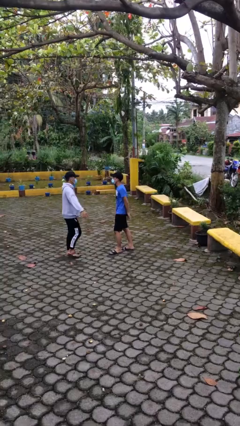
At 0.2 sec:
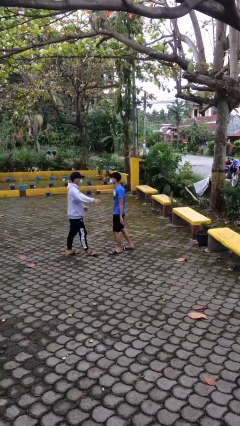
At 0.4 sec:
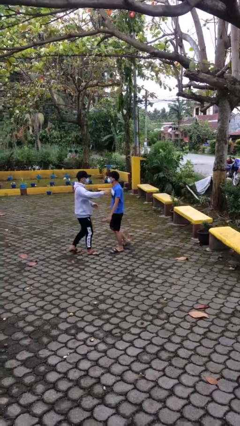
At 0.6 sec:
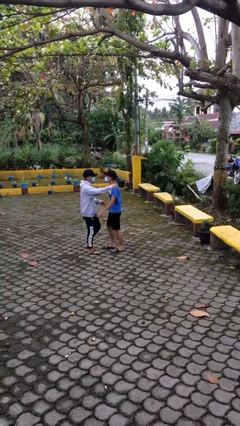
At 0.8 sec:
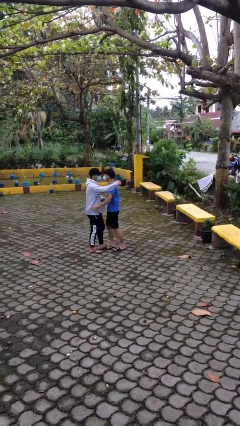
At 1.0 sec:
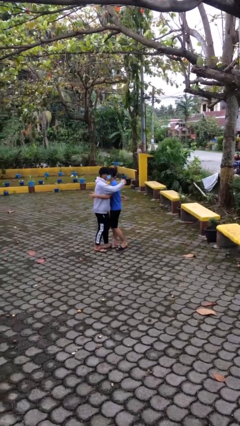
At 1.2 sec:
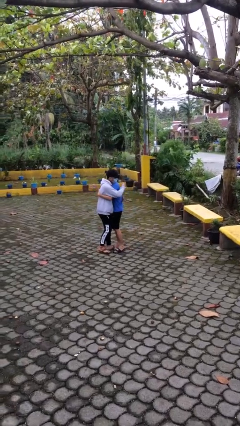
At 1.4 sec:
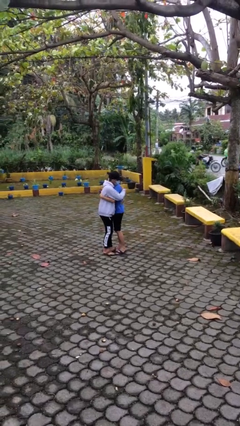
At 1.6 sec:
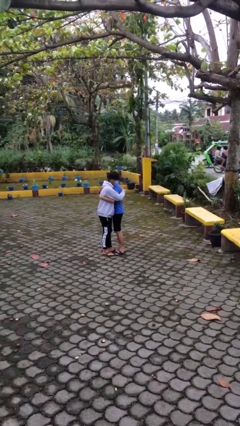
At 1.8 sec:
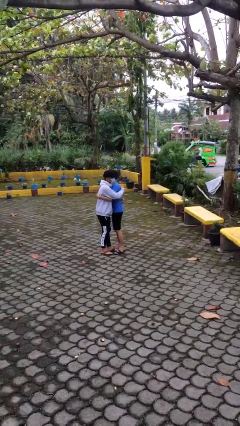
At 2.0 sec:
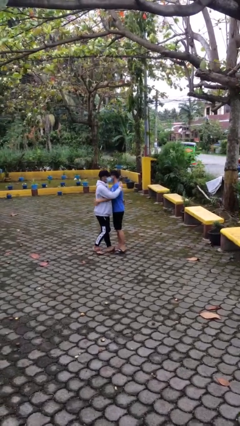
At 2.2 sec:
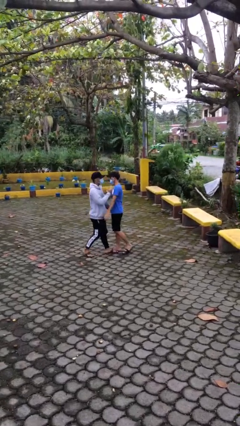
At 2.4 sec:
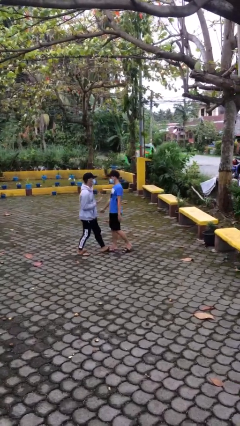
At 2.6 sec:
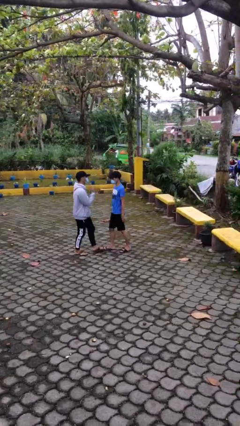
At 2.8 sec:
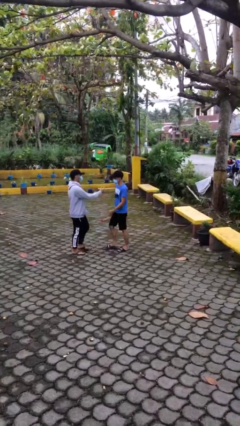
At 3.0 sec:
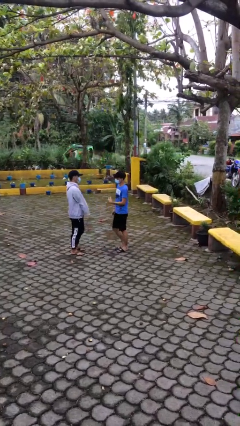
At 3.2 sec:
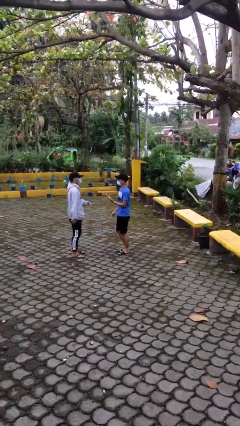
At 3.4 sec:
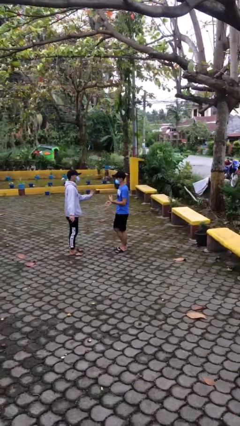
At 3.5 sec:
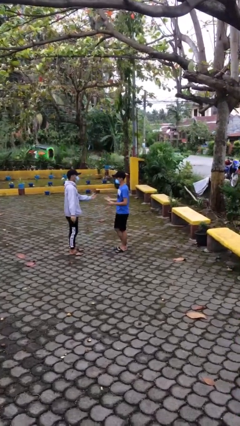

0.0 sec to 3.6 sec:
person embraces person

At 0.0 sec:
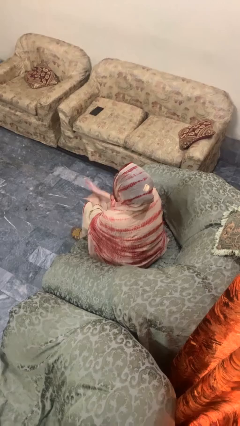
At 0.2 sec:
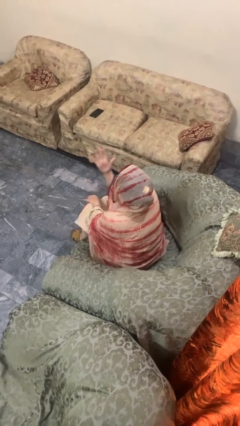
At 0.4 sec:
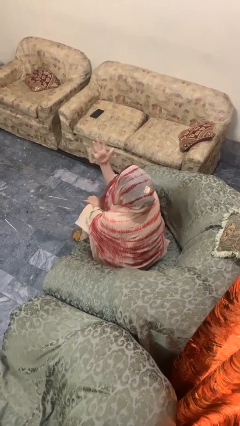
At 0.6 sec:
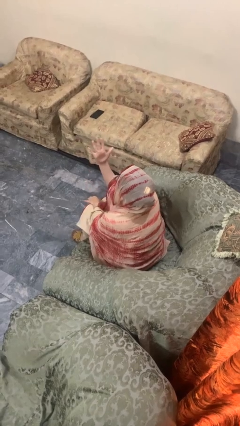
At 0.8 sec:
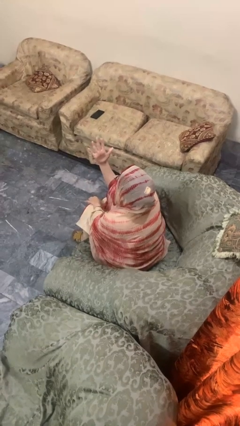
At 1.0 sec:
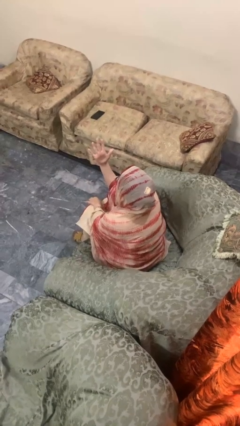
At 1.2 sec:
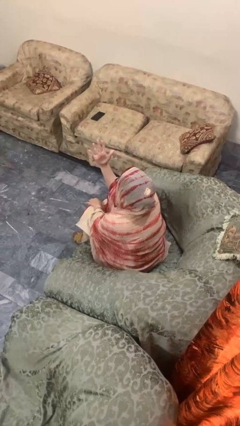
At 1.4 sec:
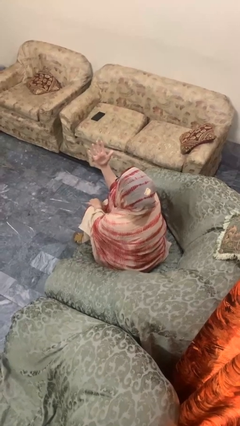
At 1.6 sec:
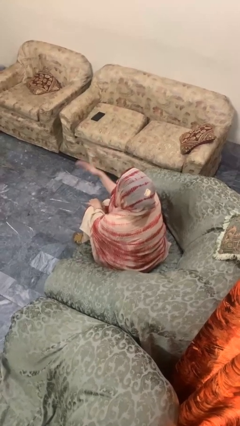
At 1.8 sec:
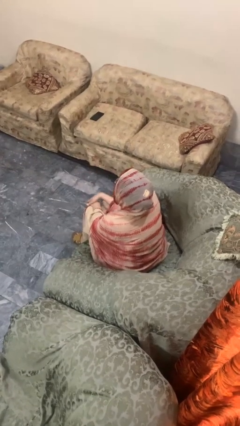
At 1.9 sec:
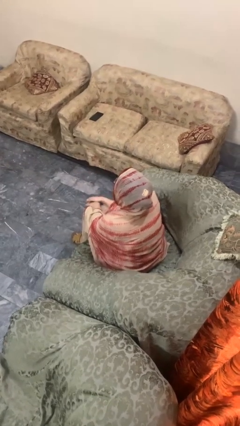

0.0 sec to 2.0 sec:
person gestures number five

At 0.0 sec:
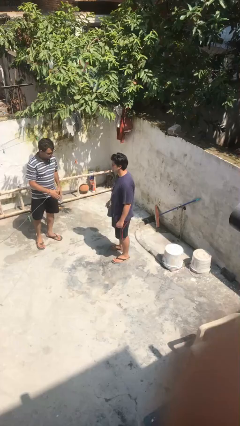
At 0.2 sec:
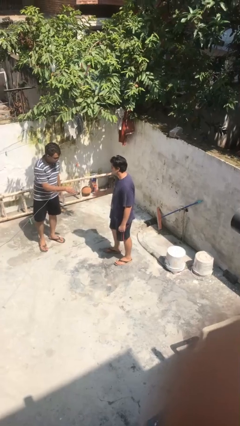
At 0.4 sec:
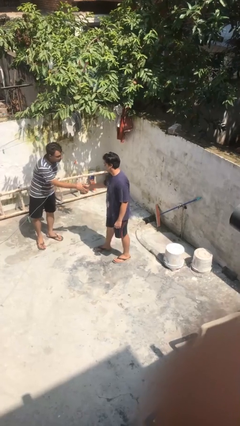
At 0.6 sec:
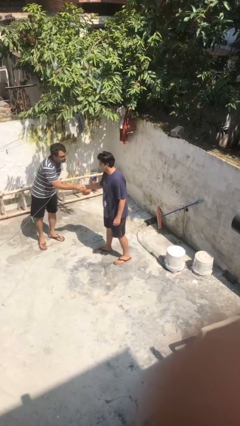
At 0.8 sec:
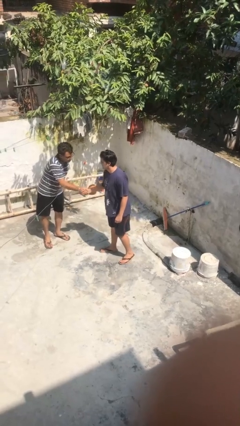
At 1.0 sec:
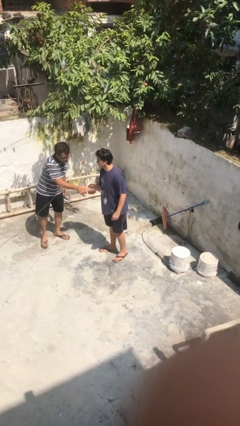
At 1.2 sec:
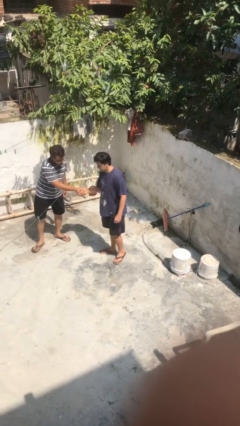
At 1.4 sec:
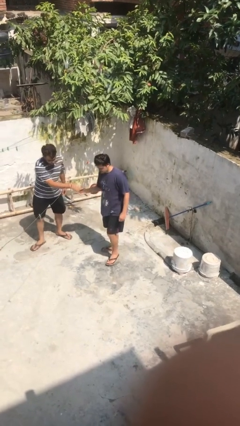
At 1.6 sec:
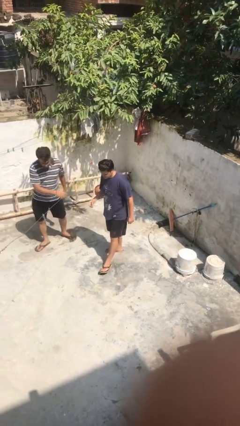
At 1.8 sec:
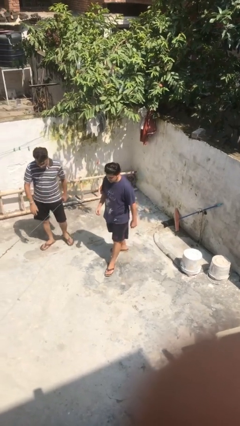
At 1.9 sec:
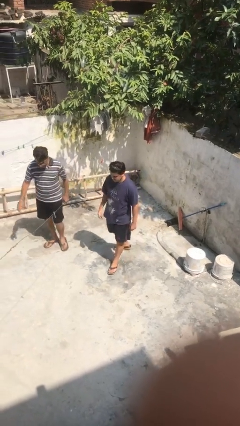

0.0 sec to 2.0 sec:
person shakes hand

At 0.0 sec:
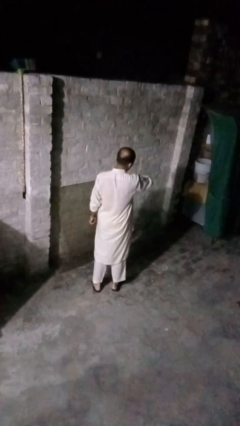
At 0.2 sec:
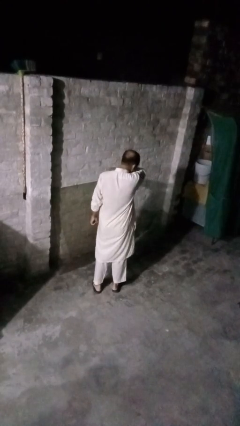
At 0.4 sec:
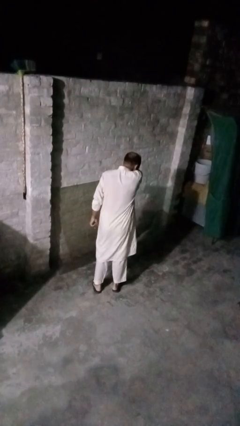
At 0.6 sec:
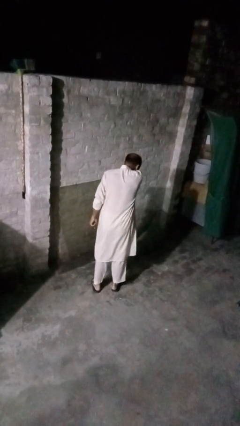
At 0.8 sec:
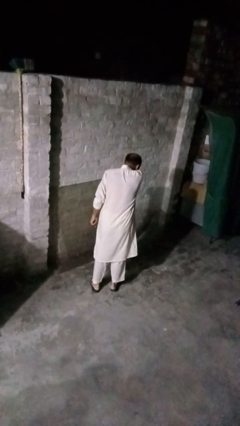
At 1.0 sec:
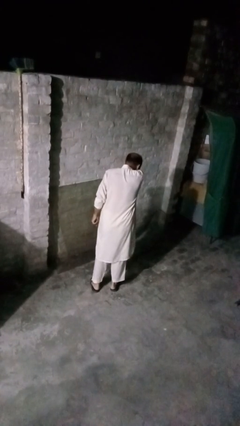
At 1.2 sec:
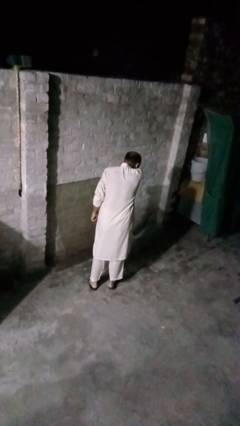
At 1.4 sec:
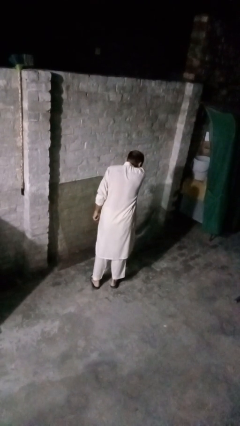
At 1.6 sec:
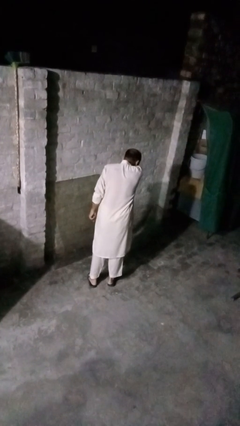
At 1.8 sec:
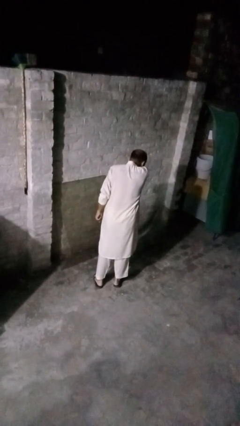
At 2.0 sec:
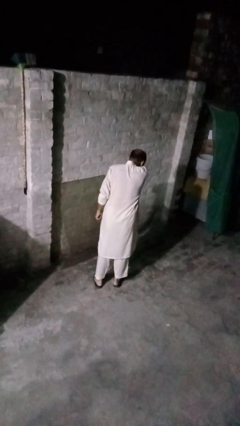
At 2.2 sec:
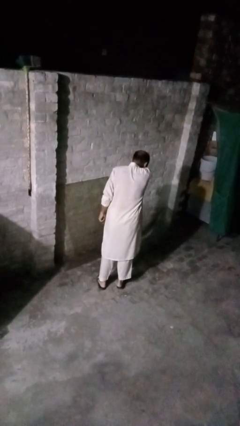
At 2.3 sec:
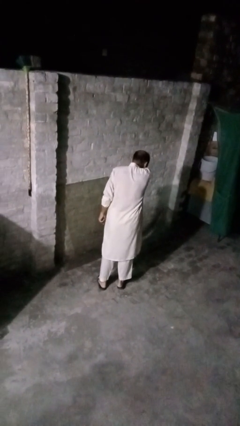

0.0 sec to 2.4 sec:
person sneezes into arm

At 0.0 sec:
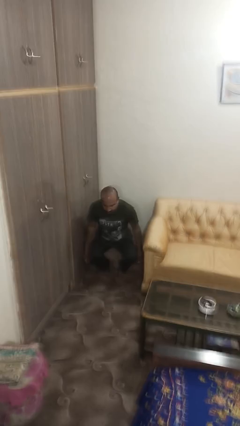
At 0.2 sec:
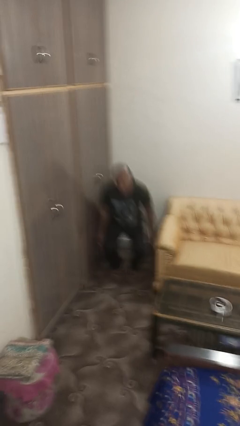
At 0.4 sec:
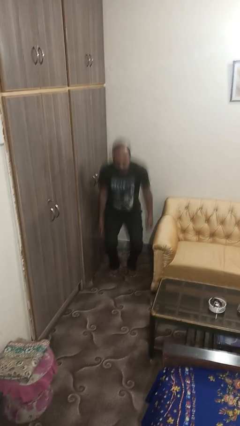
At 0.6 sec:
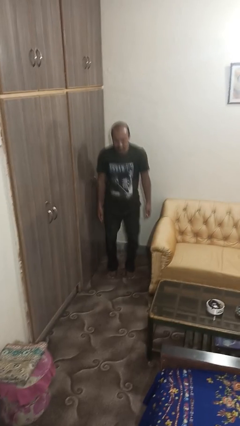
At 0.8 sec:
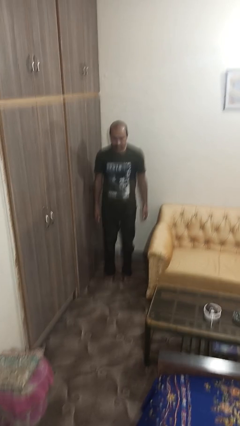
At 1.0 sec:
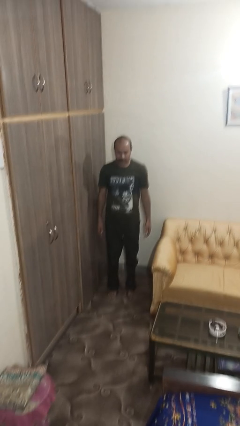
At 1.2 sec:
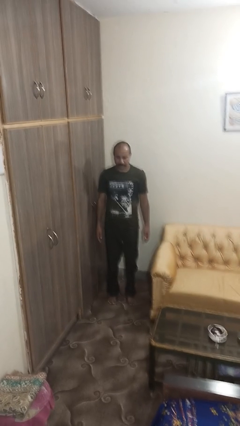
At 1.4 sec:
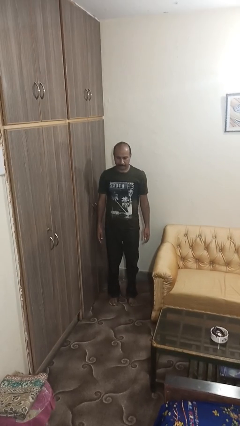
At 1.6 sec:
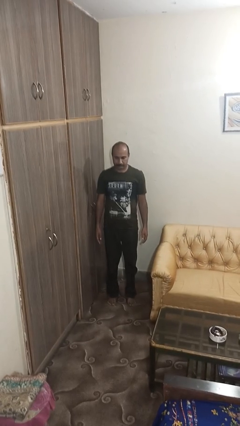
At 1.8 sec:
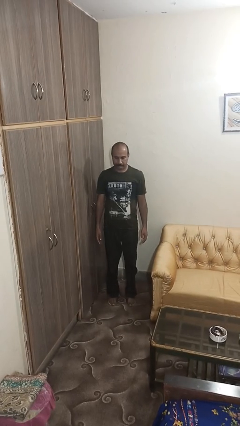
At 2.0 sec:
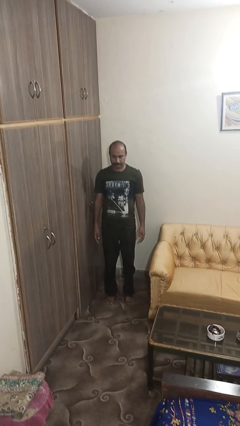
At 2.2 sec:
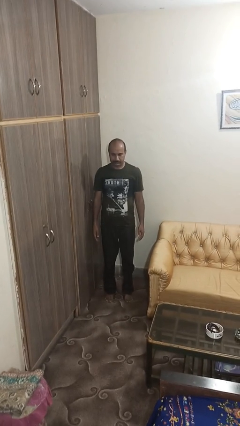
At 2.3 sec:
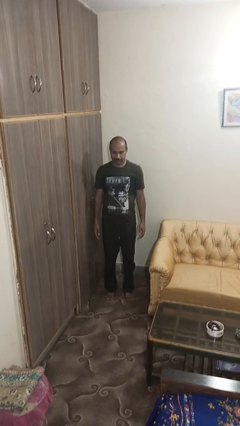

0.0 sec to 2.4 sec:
person stands up

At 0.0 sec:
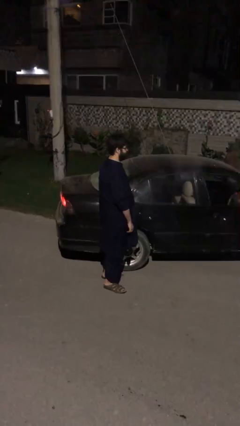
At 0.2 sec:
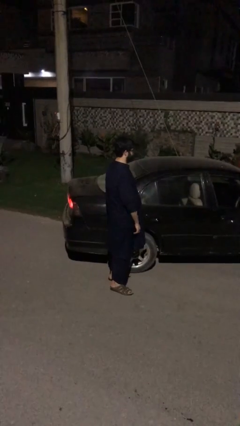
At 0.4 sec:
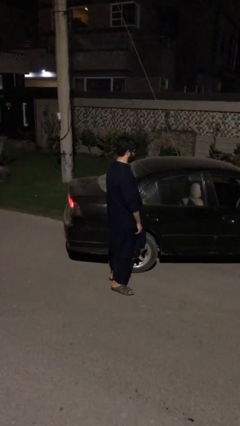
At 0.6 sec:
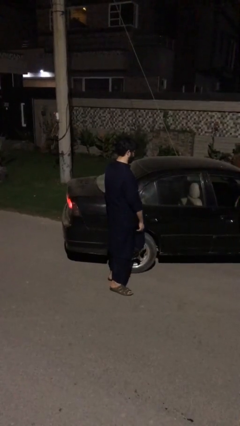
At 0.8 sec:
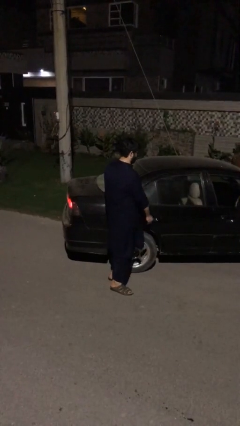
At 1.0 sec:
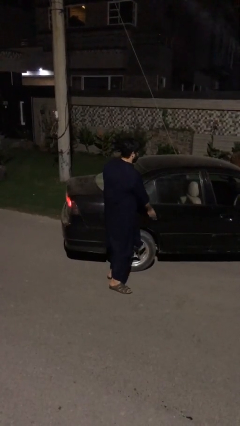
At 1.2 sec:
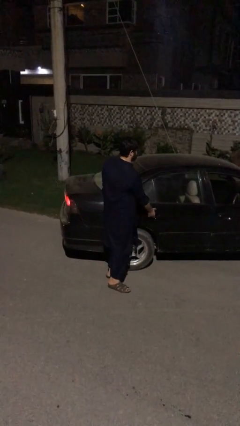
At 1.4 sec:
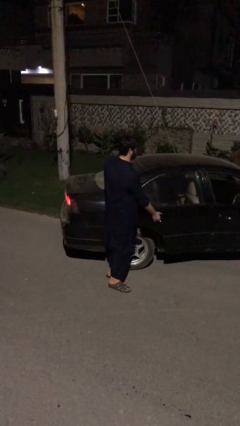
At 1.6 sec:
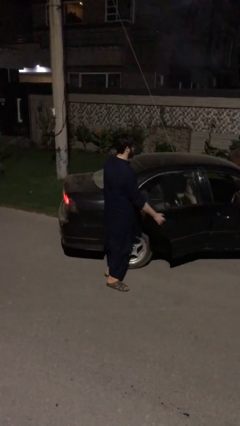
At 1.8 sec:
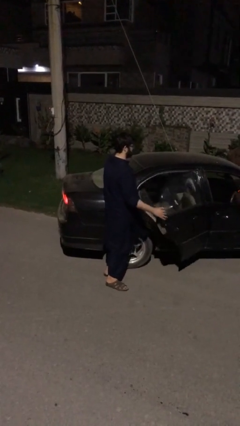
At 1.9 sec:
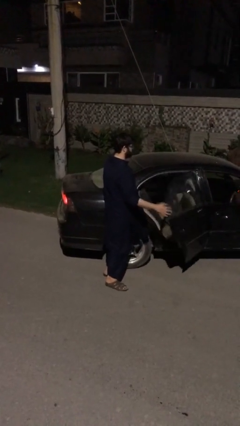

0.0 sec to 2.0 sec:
person opens car door

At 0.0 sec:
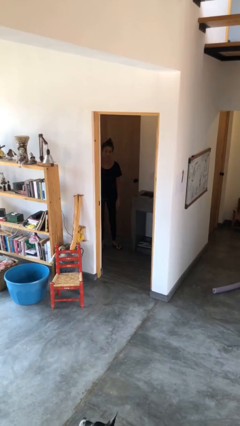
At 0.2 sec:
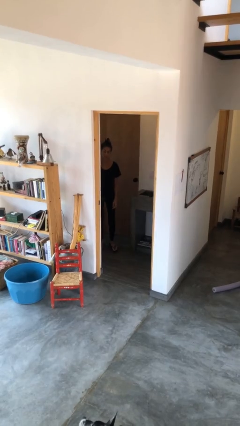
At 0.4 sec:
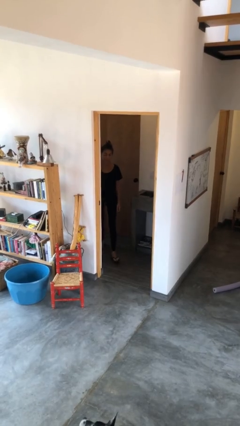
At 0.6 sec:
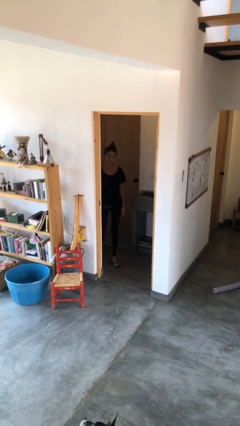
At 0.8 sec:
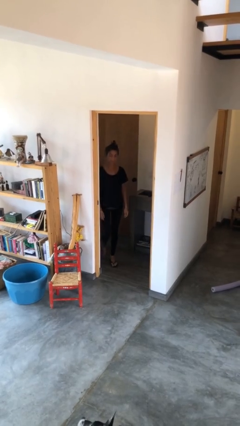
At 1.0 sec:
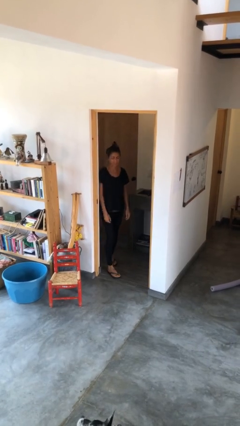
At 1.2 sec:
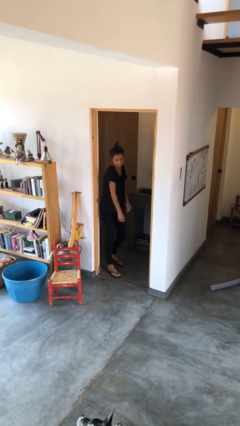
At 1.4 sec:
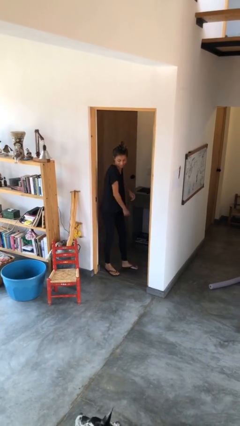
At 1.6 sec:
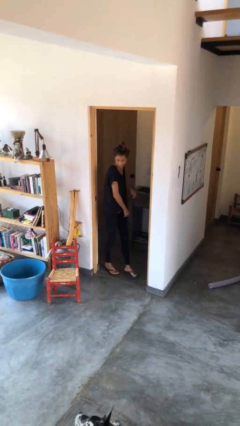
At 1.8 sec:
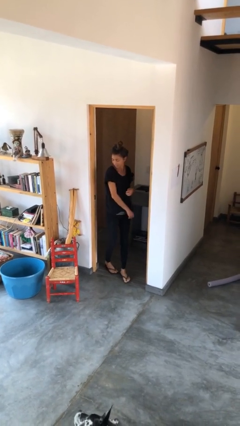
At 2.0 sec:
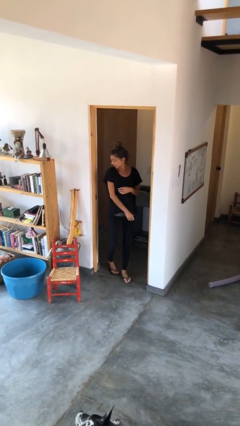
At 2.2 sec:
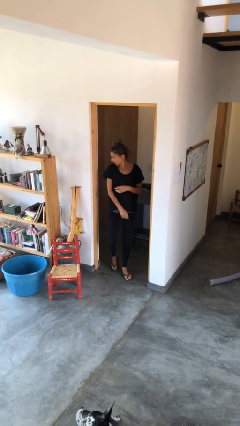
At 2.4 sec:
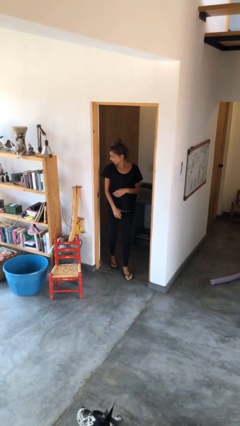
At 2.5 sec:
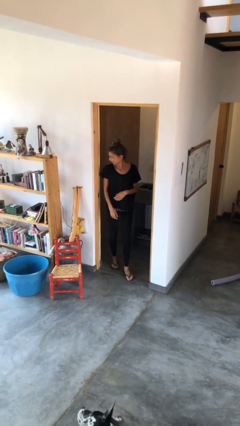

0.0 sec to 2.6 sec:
person bumps into wall
